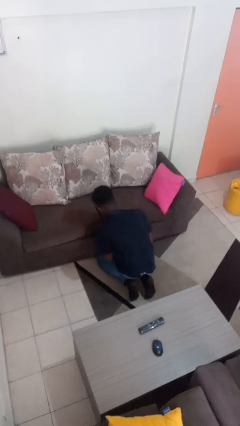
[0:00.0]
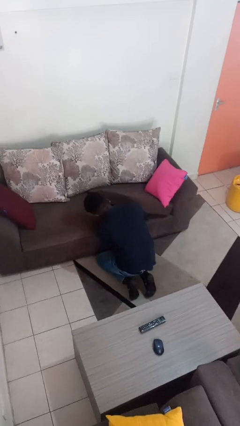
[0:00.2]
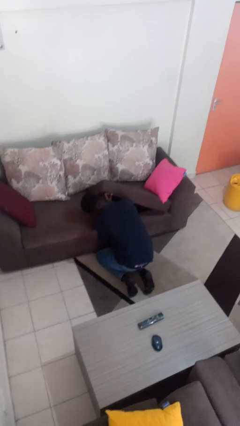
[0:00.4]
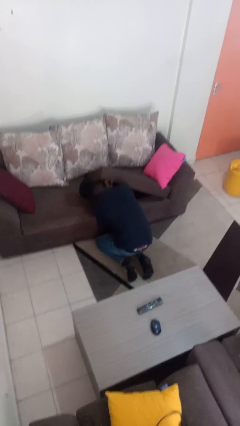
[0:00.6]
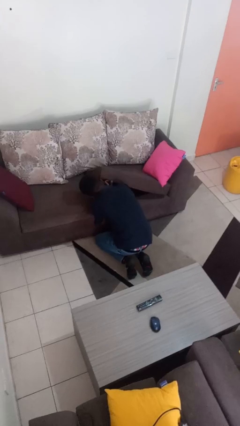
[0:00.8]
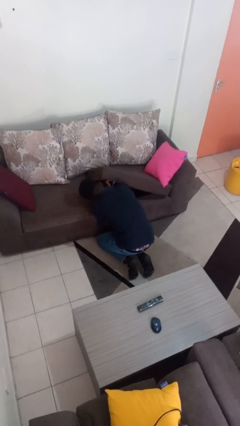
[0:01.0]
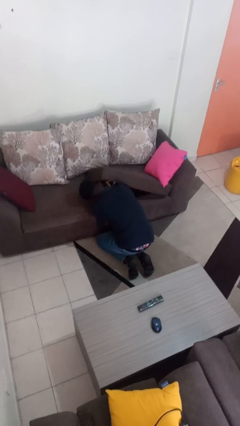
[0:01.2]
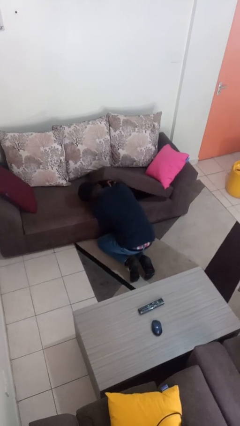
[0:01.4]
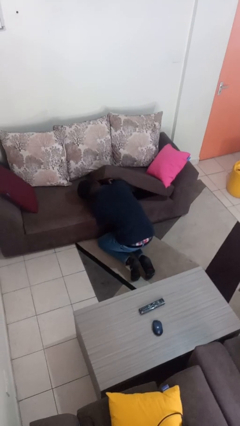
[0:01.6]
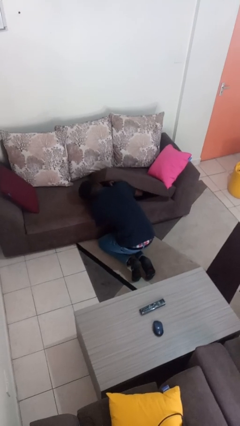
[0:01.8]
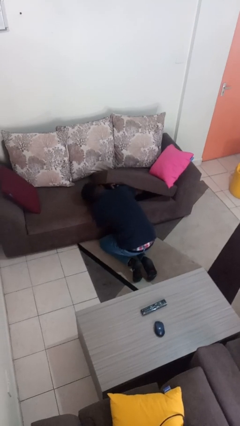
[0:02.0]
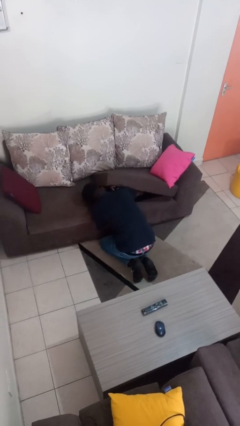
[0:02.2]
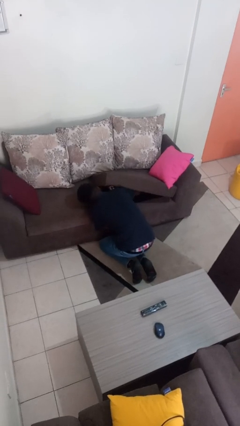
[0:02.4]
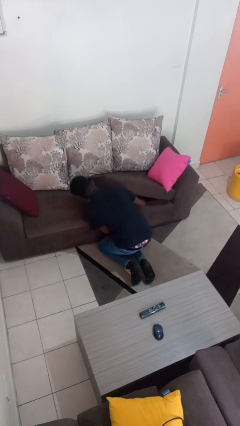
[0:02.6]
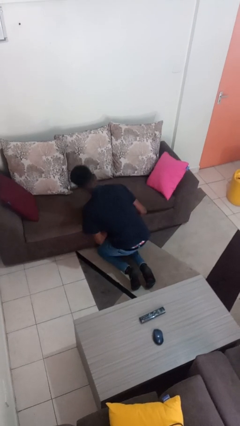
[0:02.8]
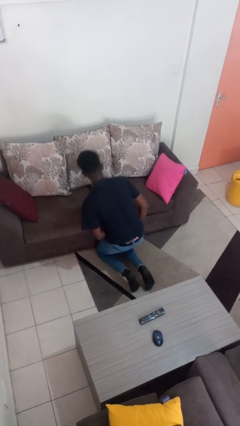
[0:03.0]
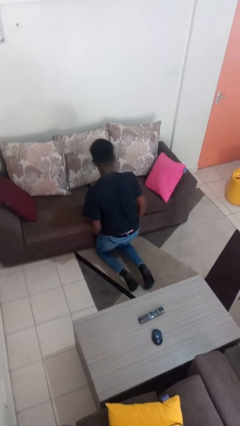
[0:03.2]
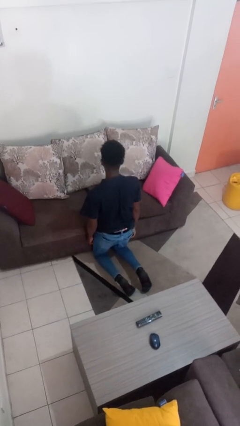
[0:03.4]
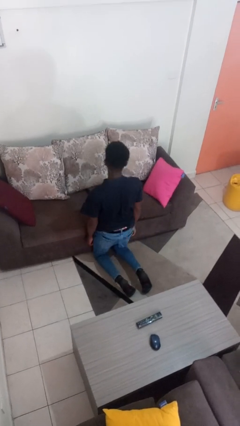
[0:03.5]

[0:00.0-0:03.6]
person searches under couch

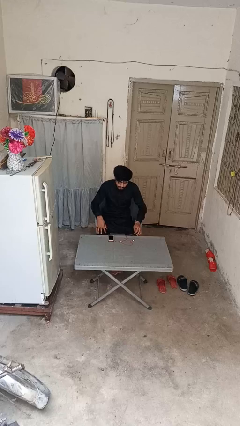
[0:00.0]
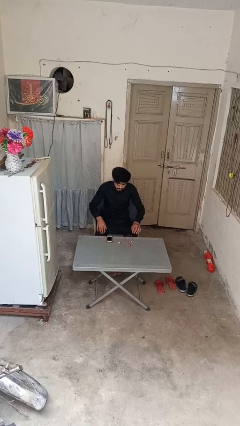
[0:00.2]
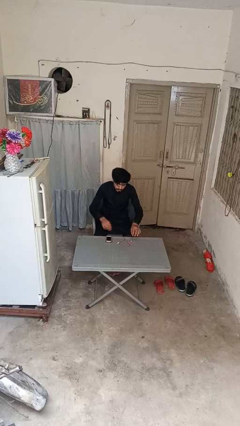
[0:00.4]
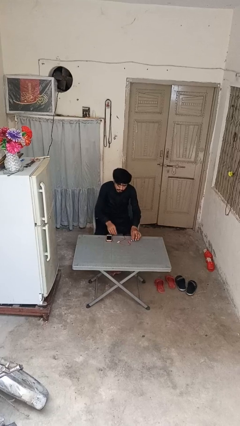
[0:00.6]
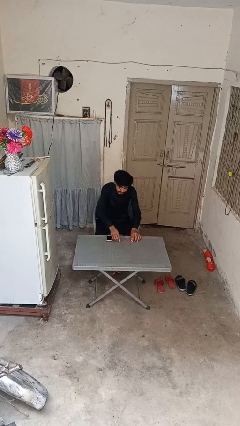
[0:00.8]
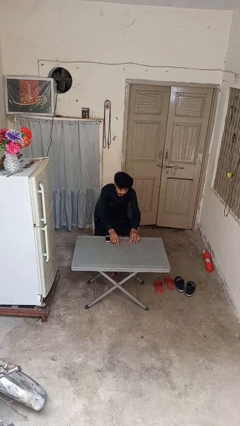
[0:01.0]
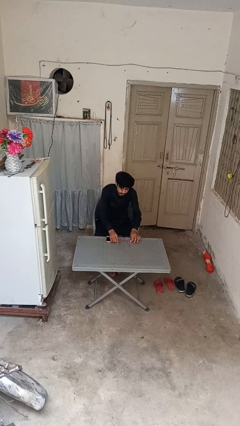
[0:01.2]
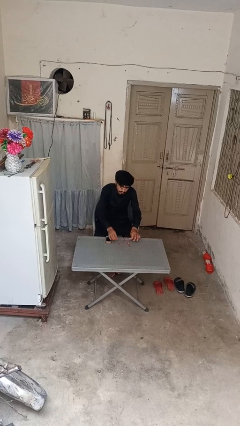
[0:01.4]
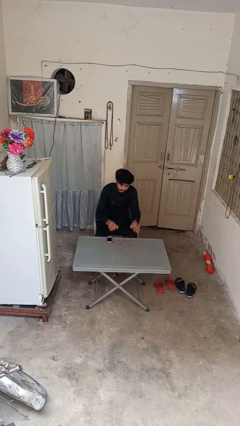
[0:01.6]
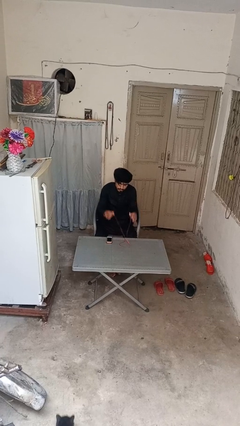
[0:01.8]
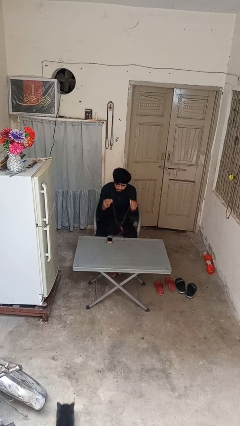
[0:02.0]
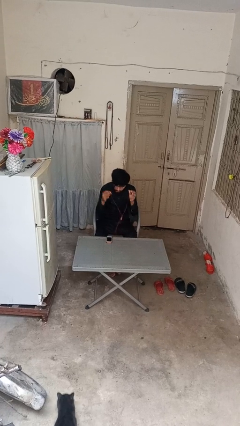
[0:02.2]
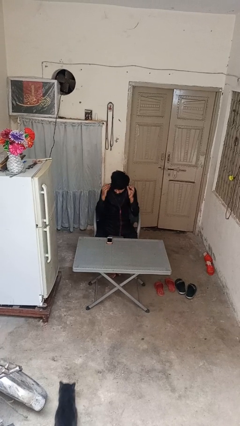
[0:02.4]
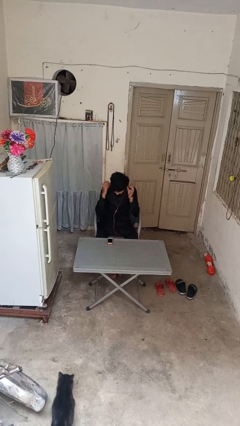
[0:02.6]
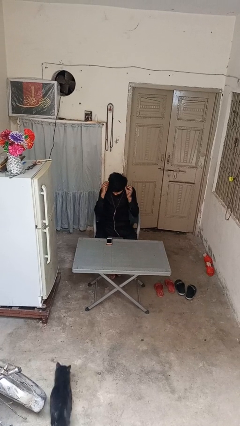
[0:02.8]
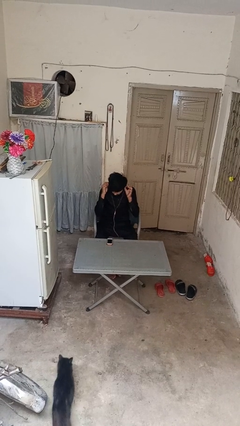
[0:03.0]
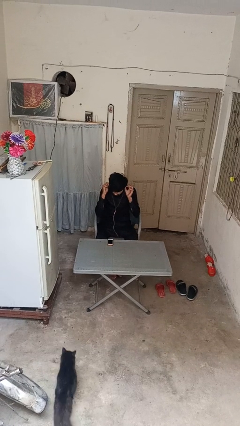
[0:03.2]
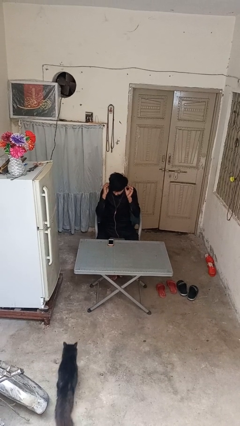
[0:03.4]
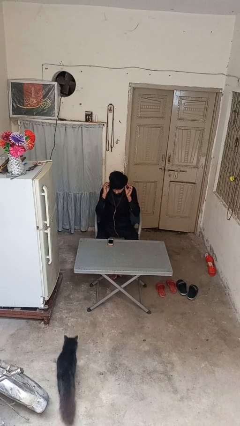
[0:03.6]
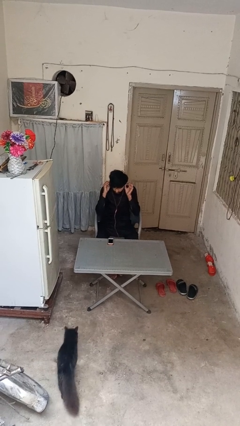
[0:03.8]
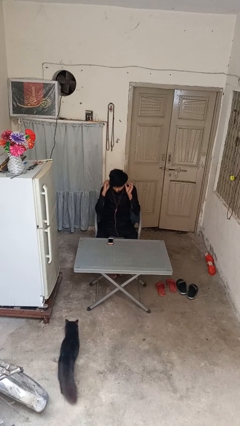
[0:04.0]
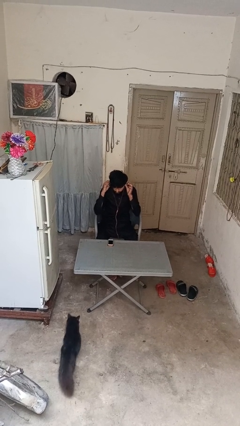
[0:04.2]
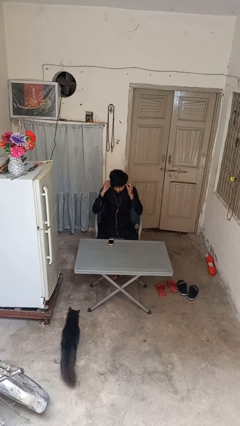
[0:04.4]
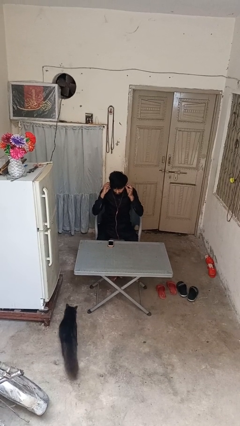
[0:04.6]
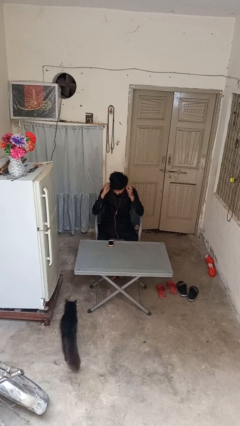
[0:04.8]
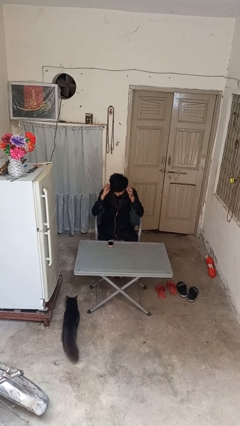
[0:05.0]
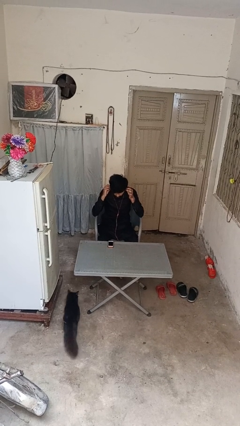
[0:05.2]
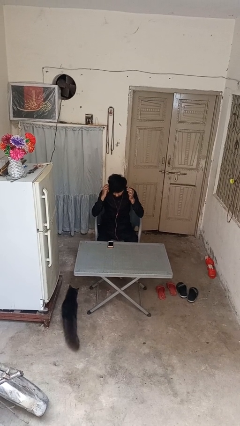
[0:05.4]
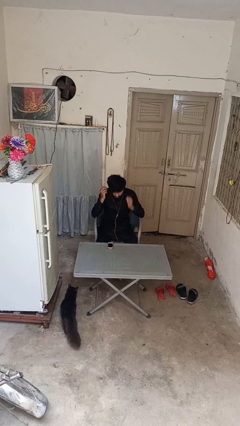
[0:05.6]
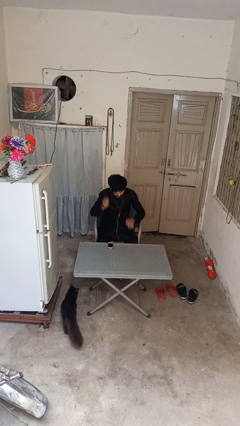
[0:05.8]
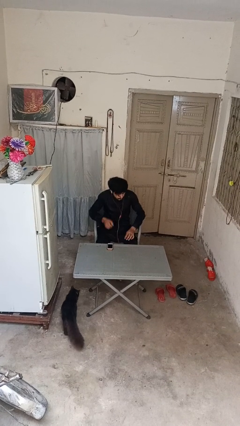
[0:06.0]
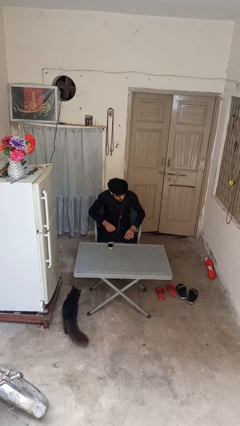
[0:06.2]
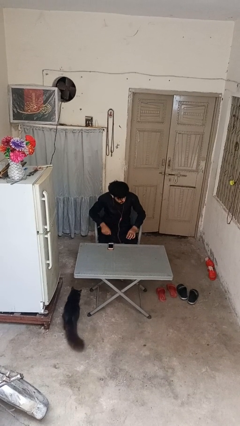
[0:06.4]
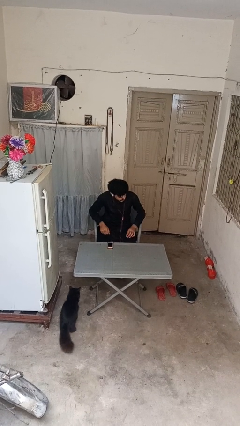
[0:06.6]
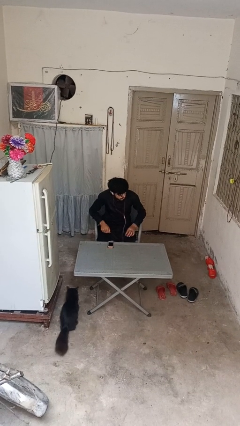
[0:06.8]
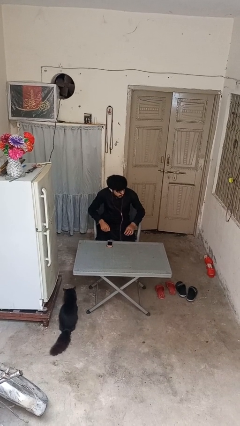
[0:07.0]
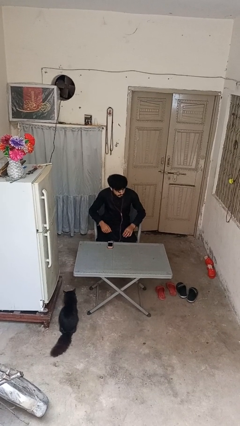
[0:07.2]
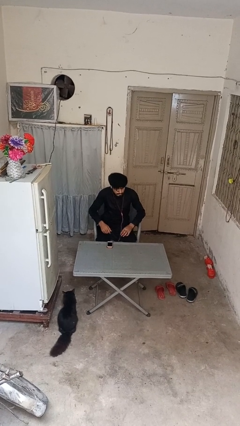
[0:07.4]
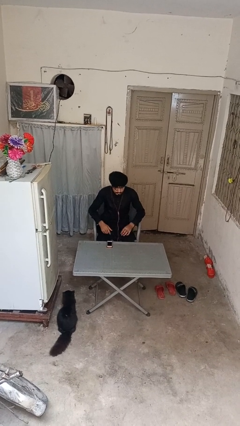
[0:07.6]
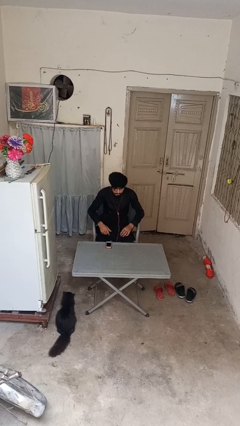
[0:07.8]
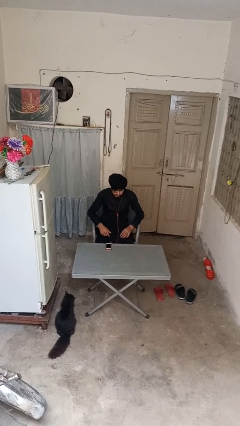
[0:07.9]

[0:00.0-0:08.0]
person puts on headphones

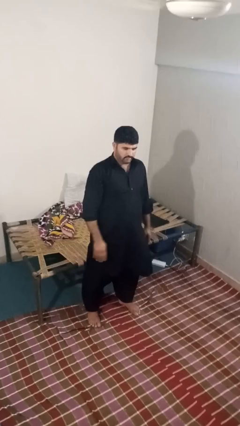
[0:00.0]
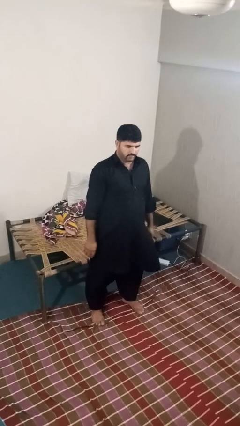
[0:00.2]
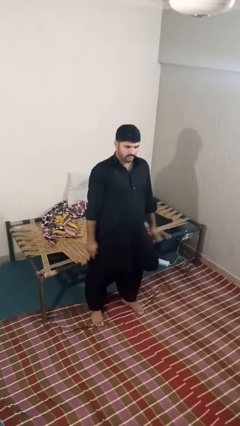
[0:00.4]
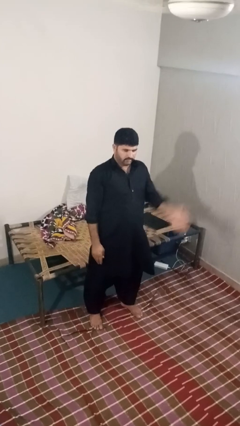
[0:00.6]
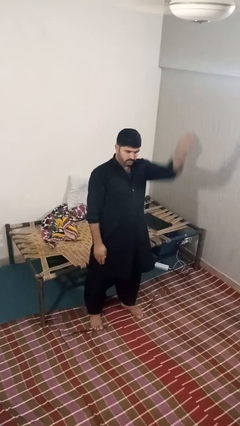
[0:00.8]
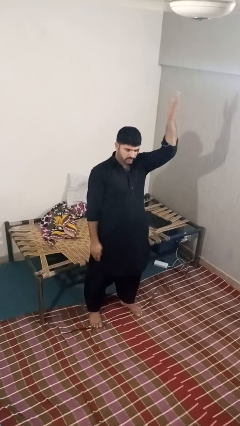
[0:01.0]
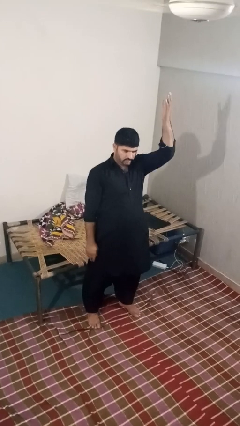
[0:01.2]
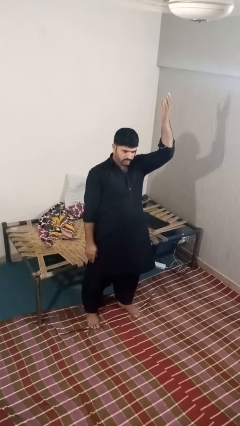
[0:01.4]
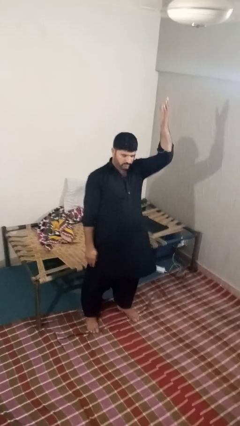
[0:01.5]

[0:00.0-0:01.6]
person gestures swipe up

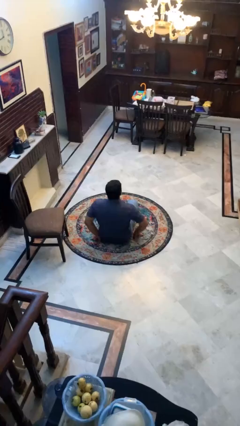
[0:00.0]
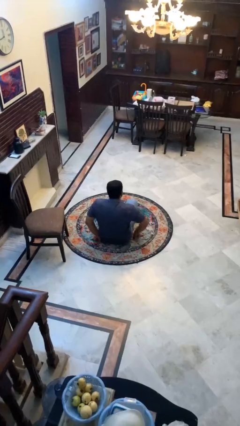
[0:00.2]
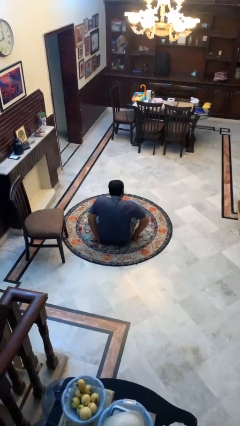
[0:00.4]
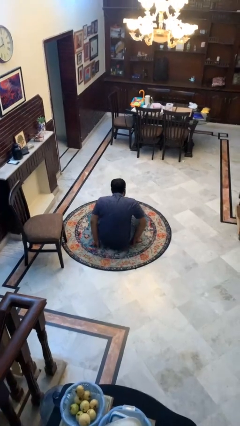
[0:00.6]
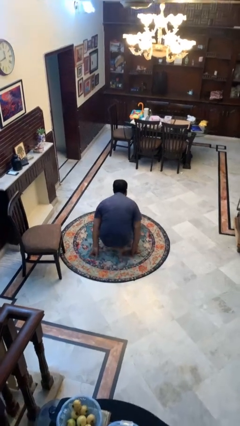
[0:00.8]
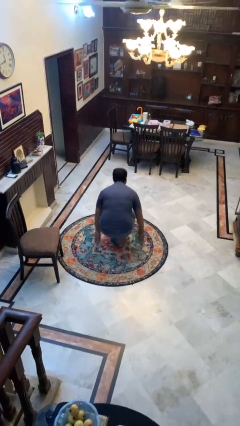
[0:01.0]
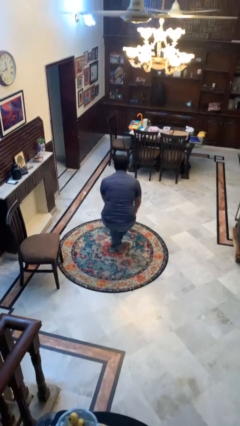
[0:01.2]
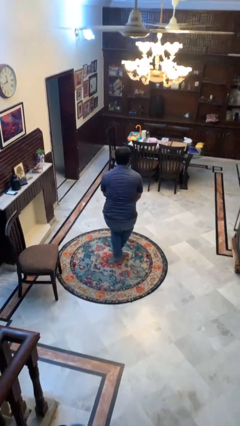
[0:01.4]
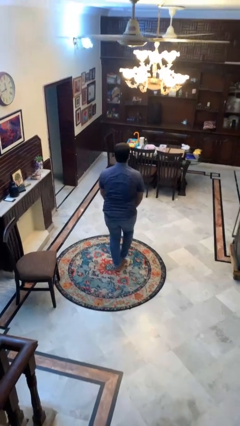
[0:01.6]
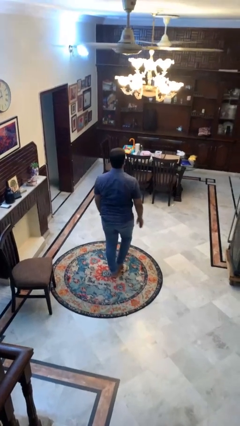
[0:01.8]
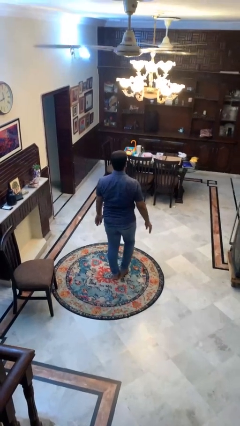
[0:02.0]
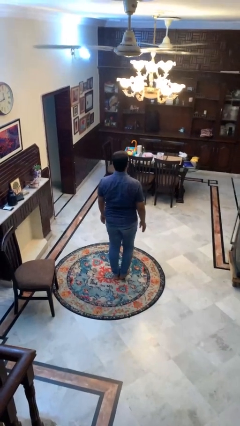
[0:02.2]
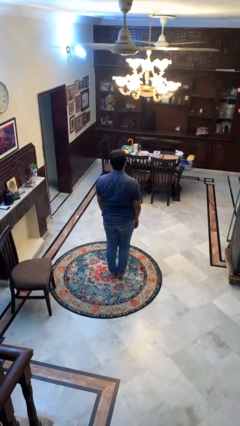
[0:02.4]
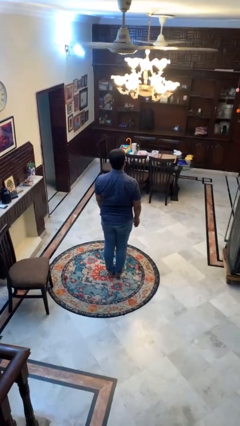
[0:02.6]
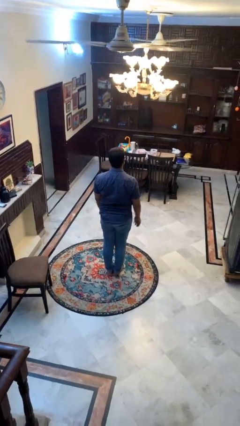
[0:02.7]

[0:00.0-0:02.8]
person stands up from floor

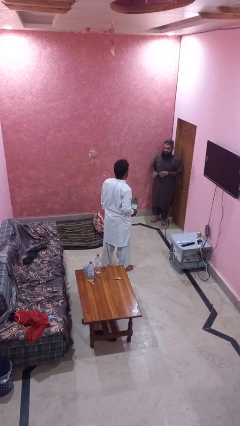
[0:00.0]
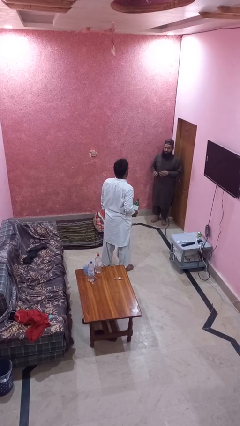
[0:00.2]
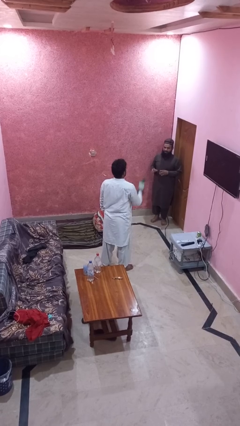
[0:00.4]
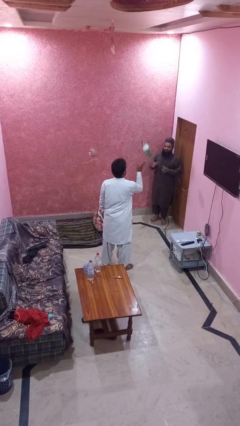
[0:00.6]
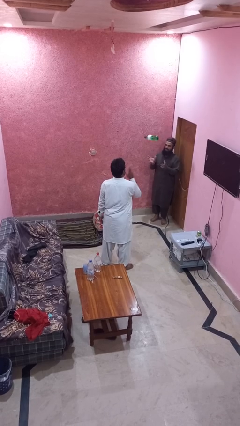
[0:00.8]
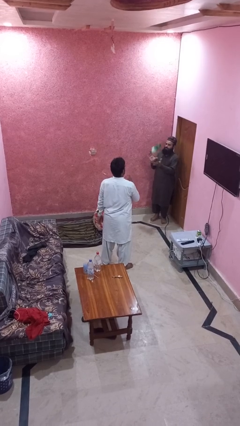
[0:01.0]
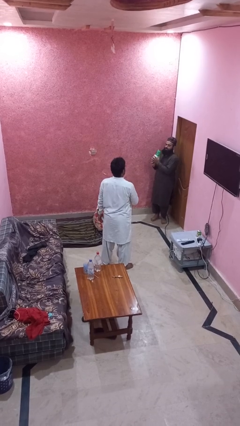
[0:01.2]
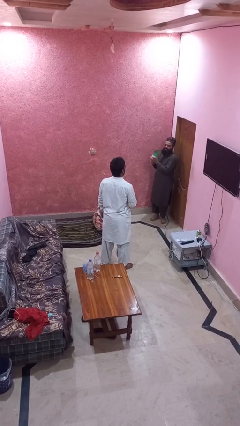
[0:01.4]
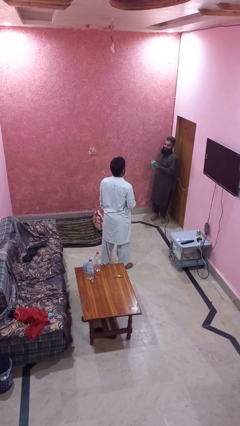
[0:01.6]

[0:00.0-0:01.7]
person throws object to person
